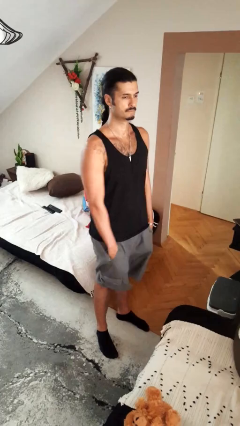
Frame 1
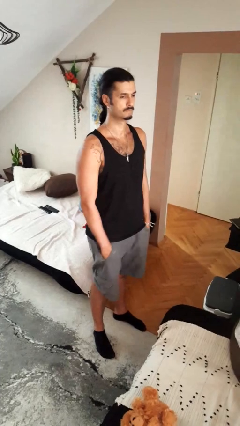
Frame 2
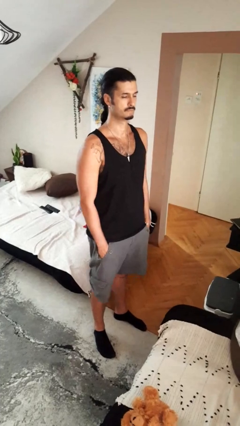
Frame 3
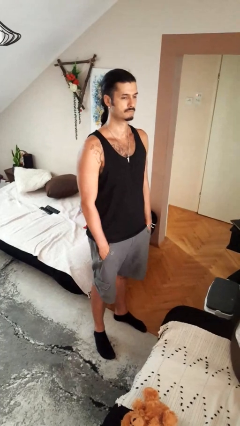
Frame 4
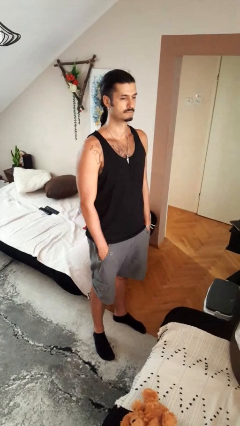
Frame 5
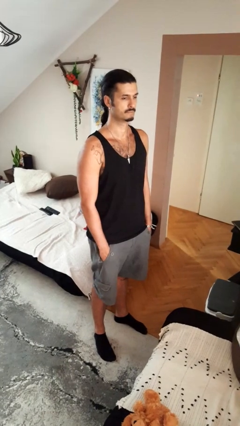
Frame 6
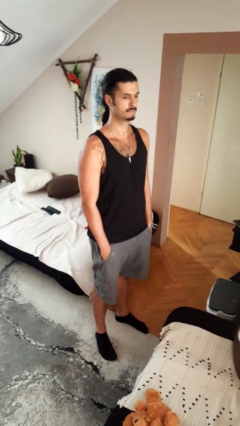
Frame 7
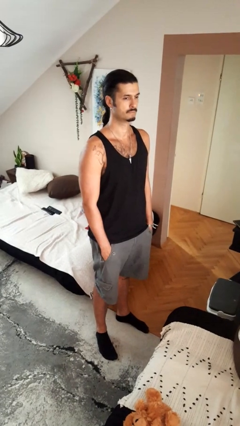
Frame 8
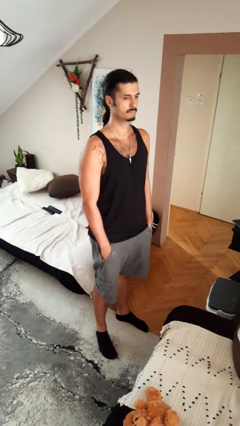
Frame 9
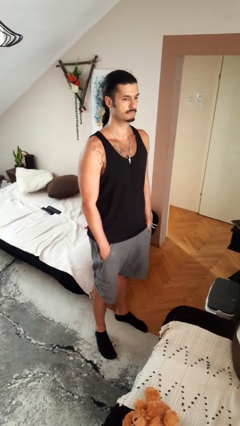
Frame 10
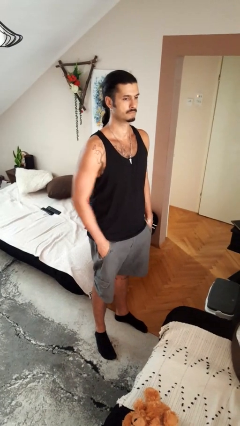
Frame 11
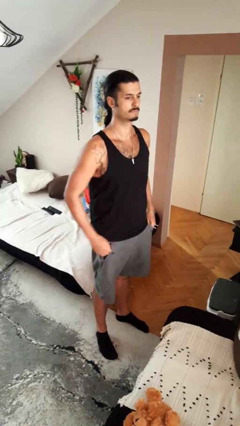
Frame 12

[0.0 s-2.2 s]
person puts hands in back pockets

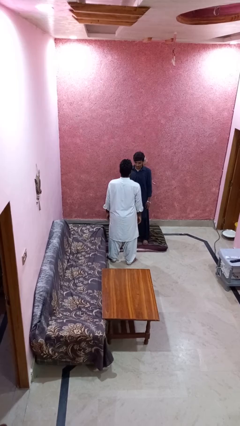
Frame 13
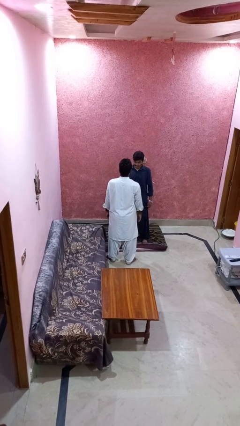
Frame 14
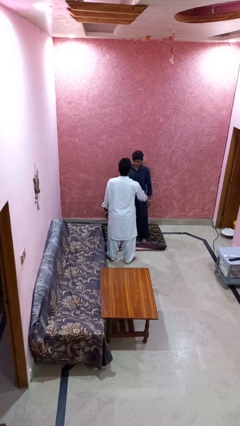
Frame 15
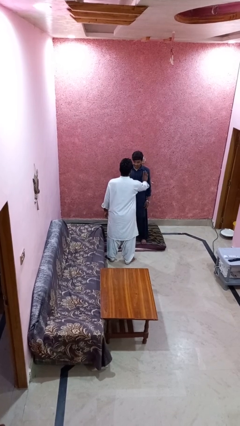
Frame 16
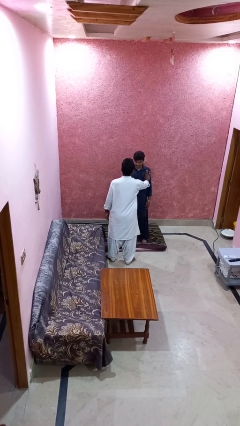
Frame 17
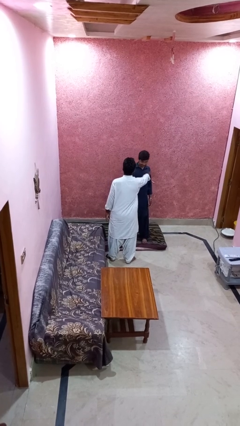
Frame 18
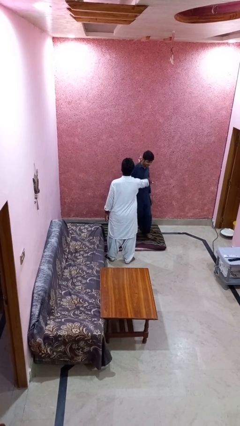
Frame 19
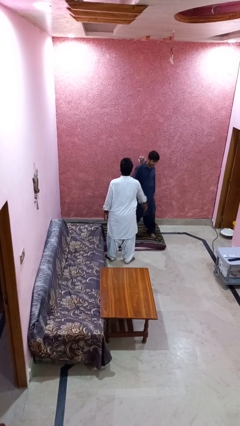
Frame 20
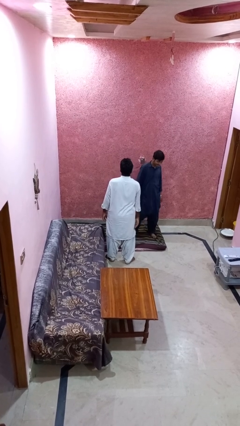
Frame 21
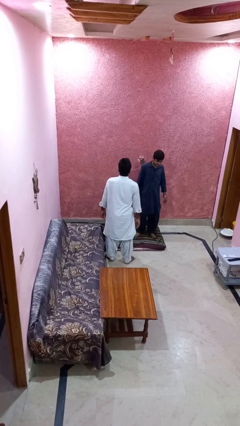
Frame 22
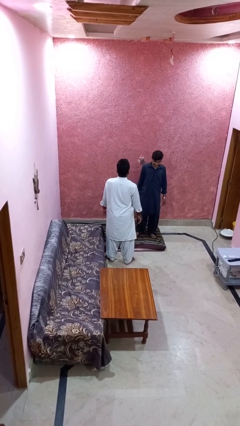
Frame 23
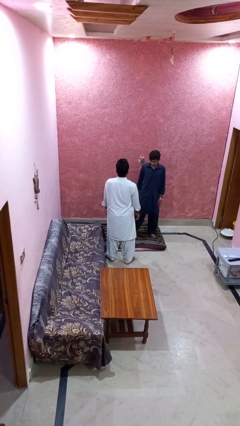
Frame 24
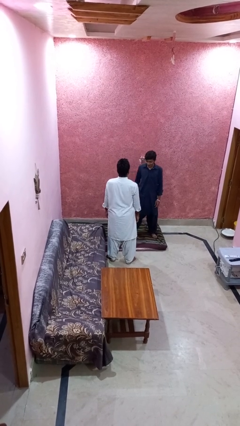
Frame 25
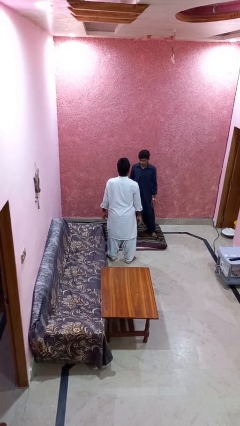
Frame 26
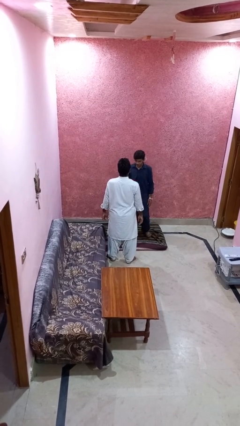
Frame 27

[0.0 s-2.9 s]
person shoves person

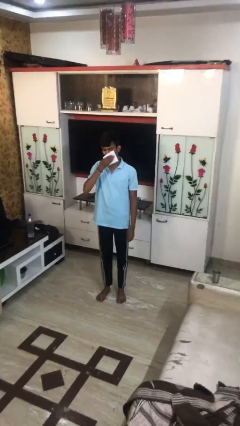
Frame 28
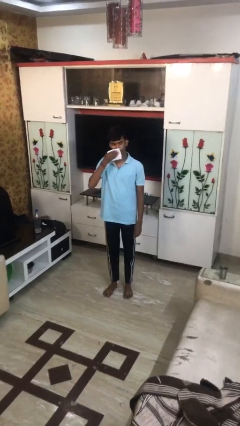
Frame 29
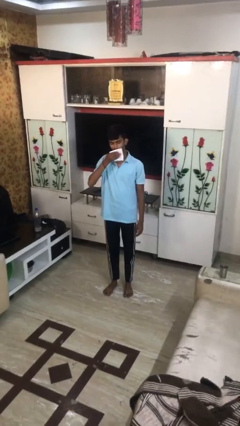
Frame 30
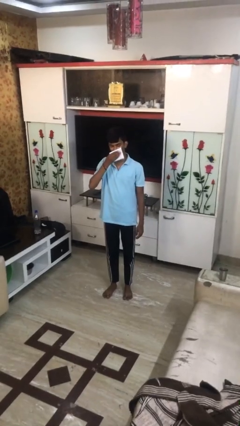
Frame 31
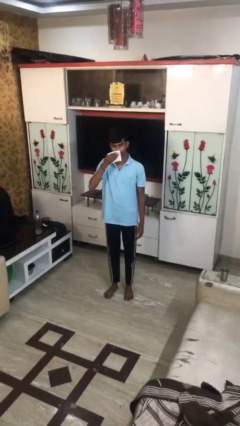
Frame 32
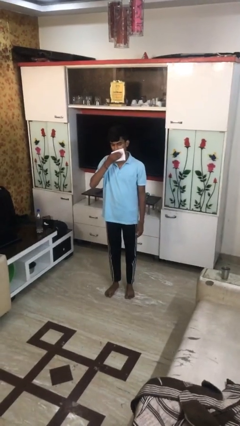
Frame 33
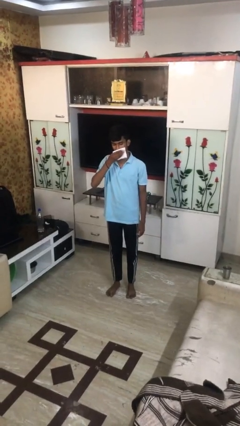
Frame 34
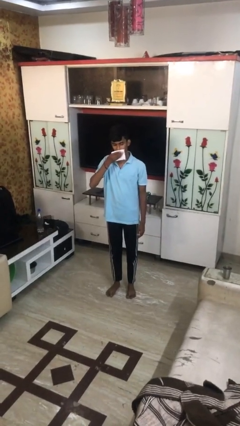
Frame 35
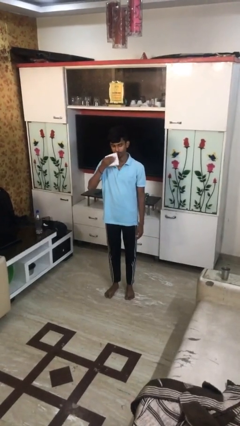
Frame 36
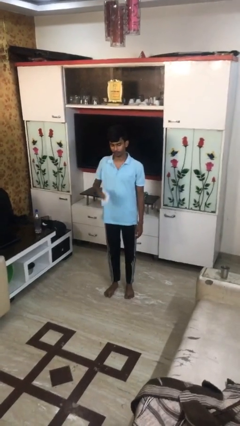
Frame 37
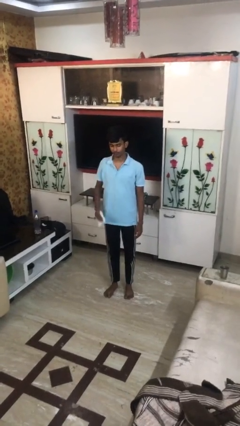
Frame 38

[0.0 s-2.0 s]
person wipes mouth with napkin

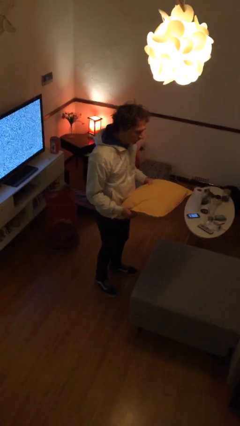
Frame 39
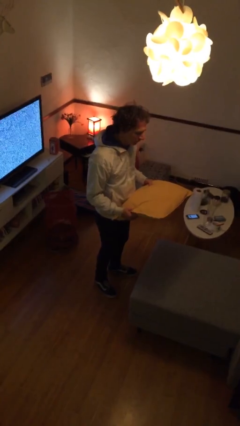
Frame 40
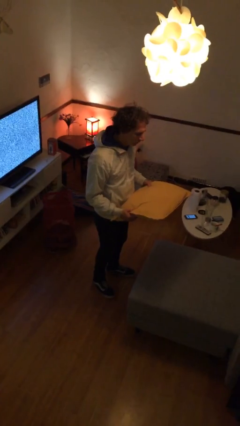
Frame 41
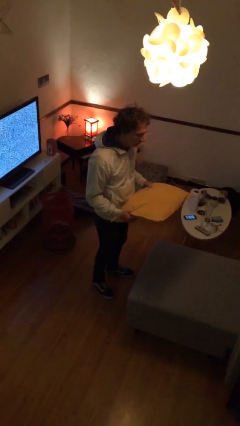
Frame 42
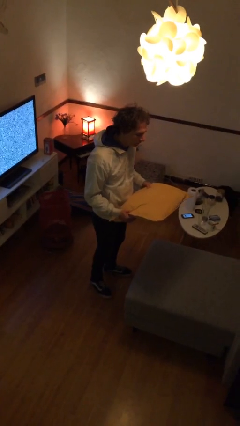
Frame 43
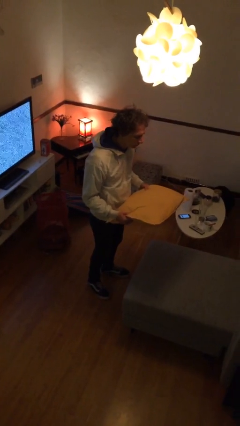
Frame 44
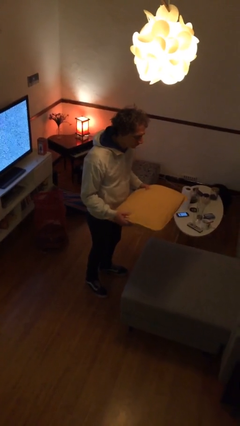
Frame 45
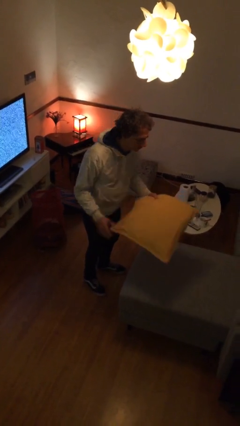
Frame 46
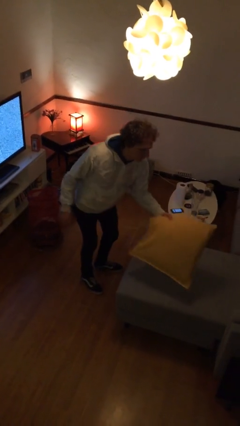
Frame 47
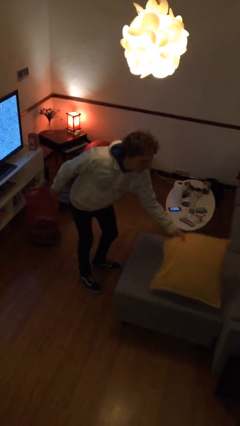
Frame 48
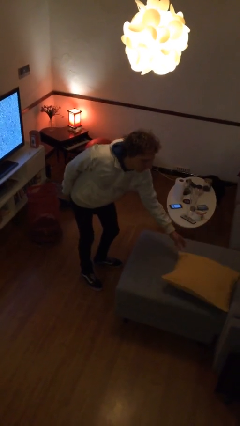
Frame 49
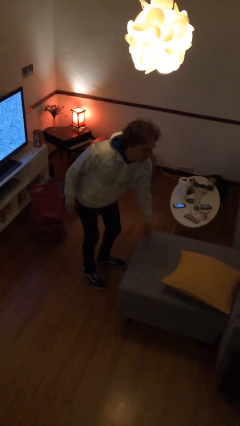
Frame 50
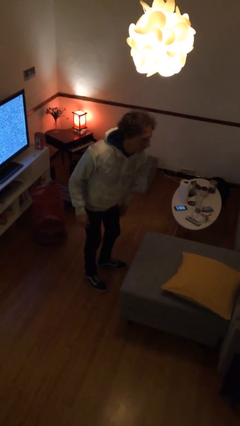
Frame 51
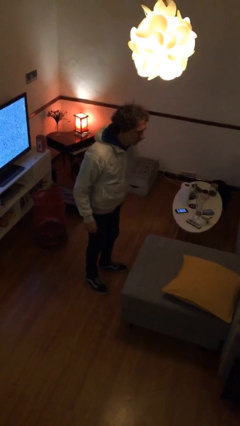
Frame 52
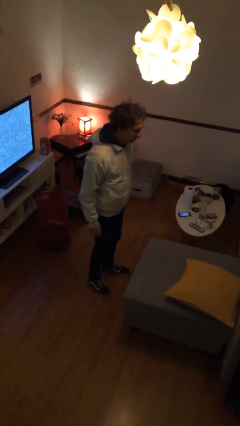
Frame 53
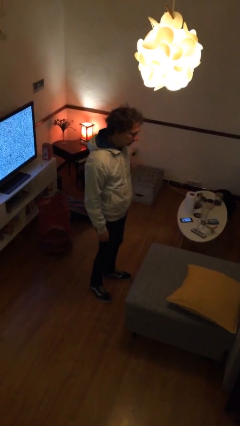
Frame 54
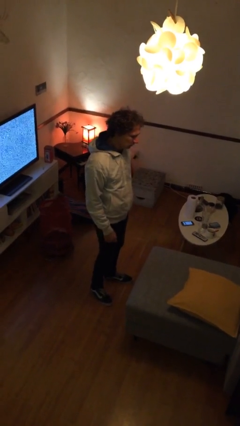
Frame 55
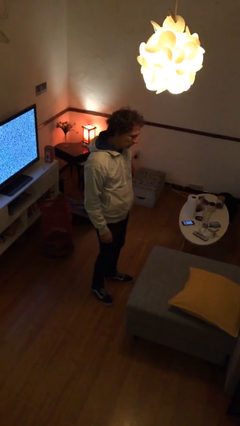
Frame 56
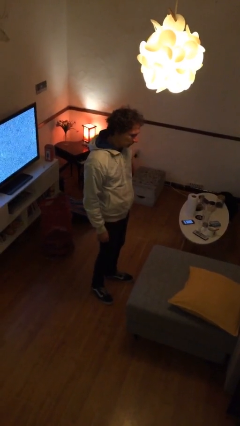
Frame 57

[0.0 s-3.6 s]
person puts down object on couch

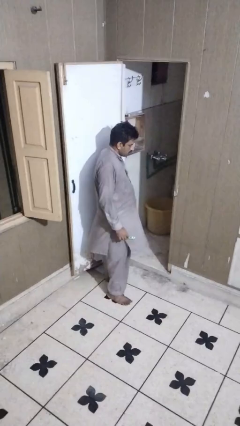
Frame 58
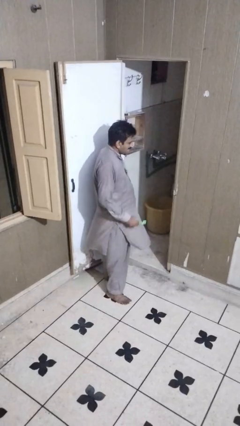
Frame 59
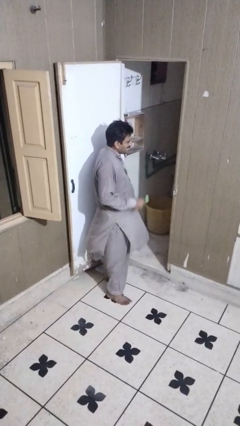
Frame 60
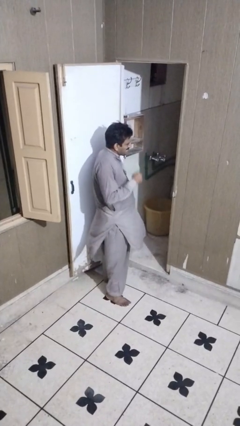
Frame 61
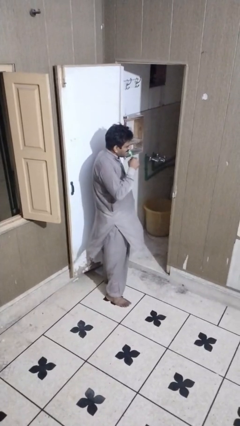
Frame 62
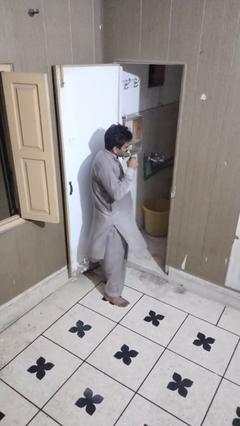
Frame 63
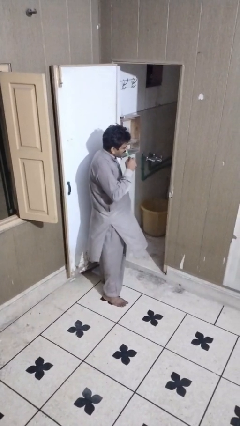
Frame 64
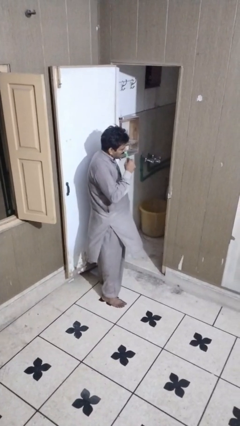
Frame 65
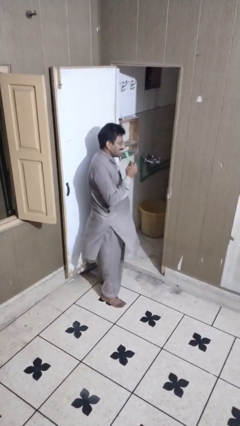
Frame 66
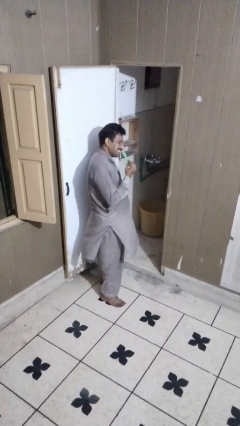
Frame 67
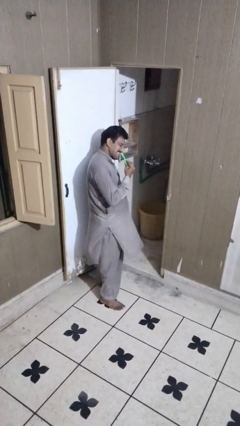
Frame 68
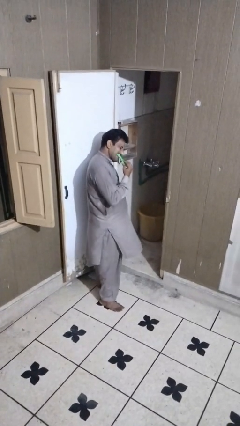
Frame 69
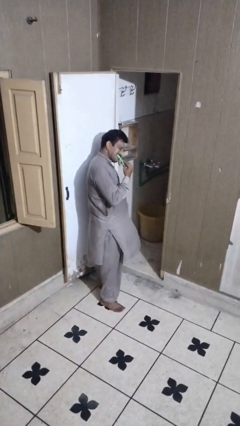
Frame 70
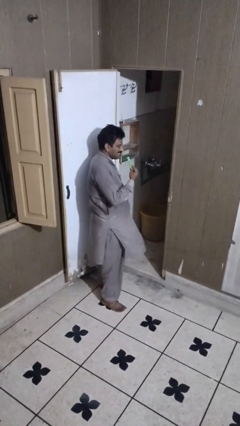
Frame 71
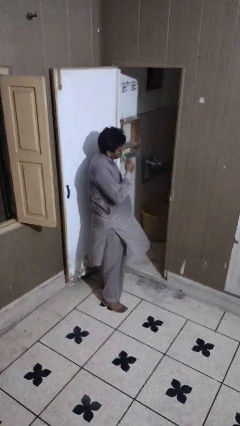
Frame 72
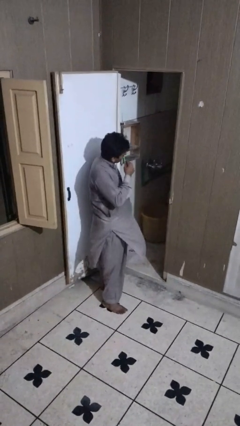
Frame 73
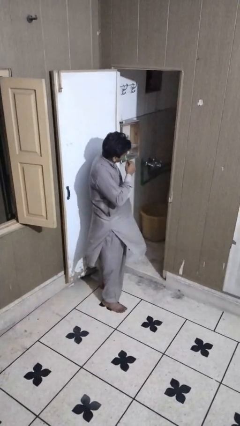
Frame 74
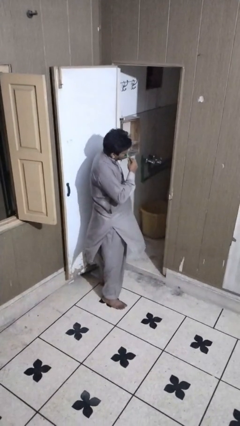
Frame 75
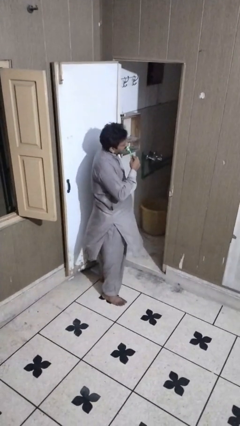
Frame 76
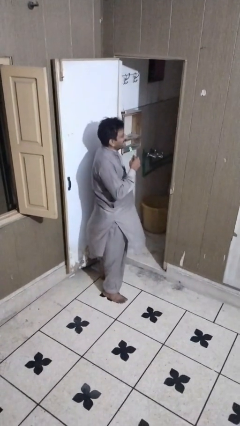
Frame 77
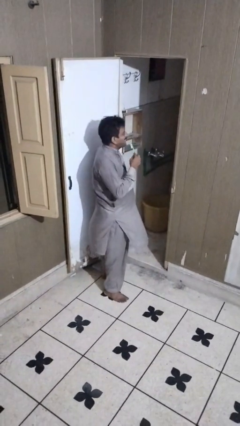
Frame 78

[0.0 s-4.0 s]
person brushes teeth

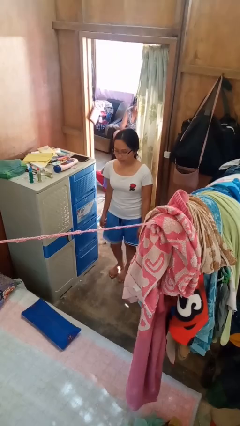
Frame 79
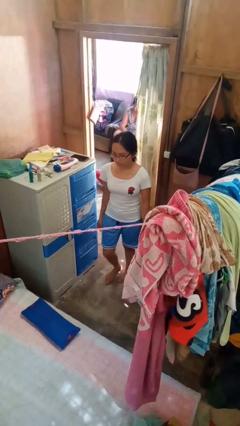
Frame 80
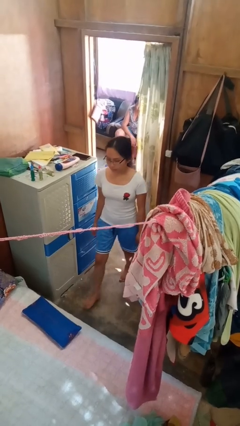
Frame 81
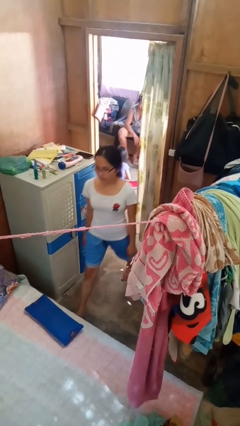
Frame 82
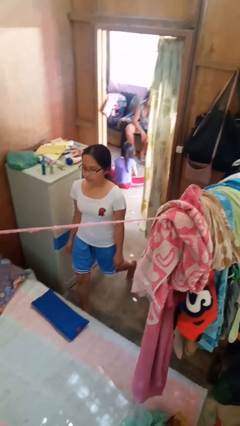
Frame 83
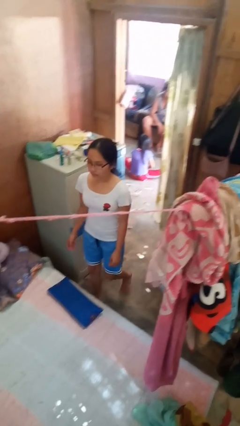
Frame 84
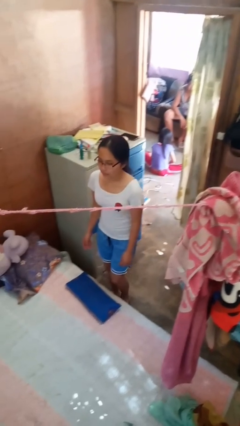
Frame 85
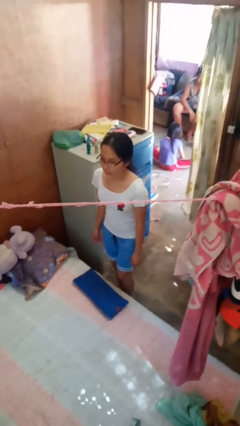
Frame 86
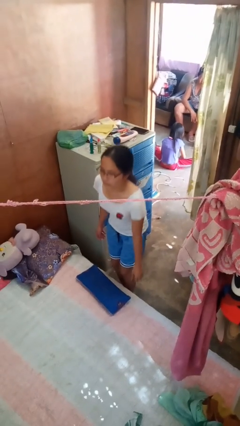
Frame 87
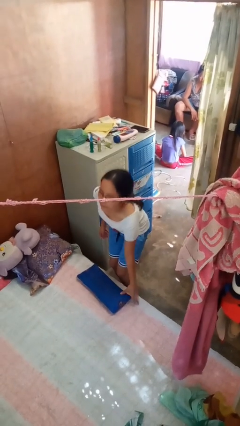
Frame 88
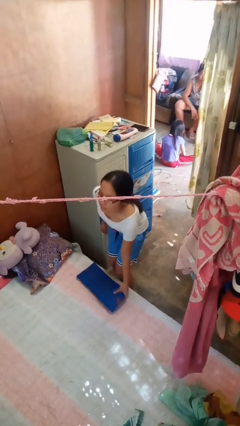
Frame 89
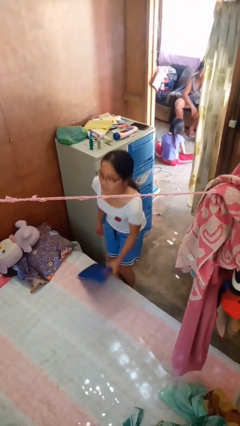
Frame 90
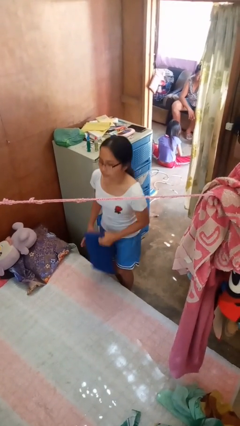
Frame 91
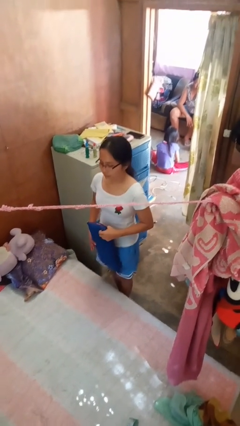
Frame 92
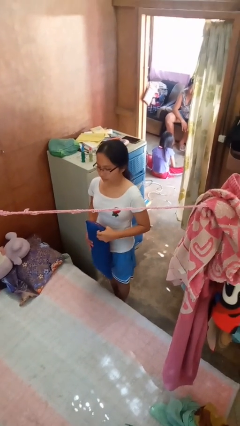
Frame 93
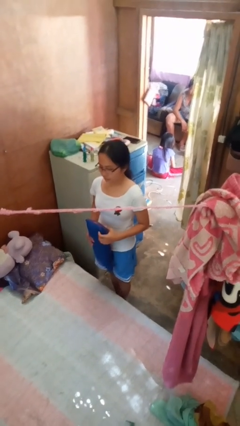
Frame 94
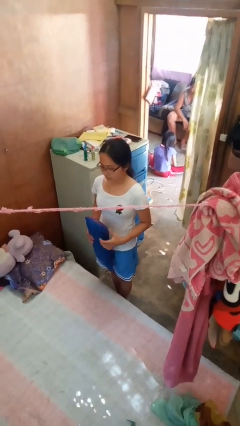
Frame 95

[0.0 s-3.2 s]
person picks up object from bed
